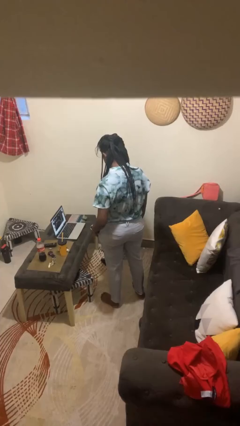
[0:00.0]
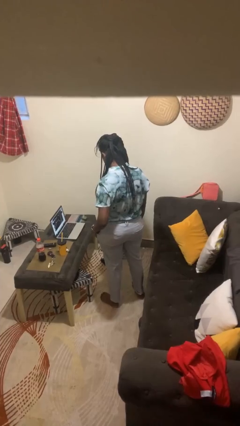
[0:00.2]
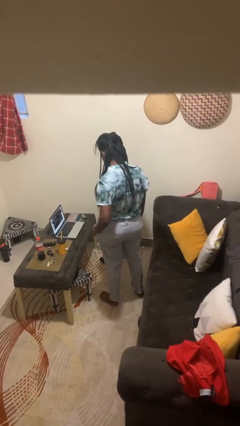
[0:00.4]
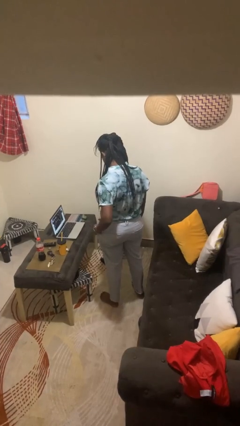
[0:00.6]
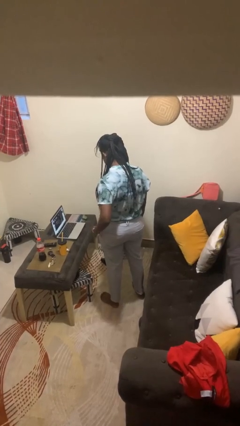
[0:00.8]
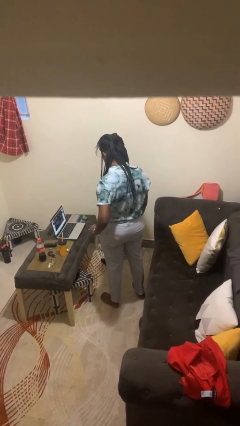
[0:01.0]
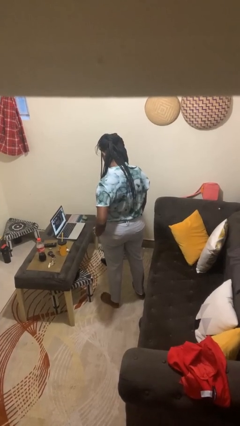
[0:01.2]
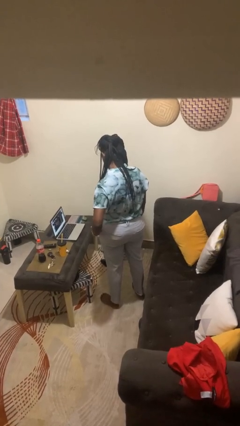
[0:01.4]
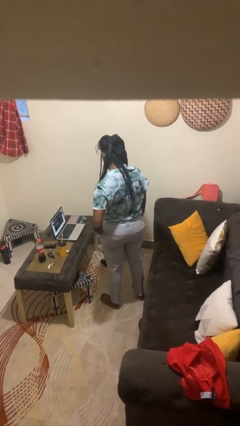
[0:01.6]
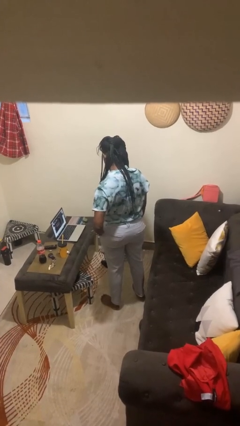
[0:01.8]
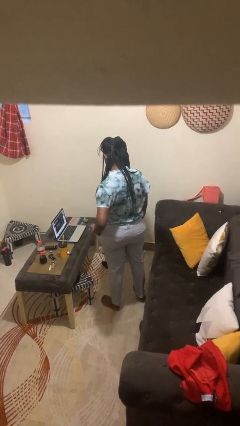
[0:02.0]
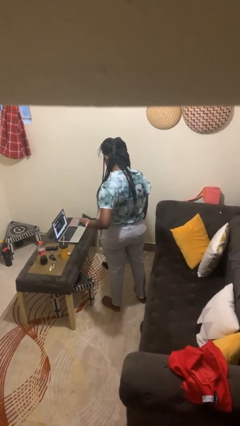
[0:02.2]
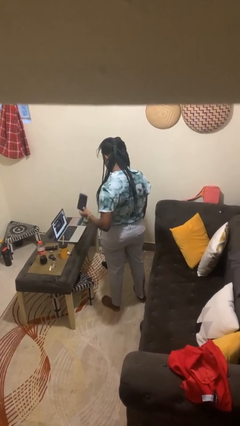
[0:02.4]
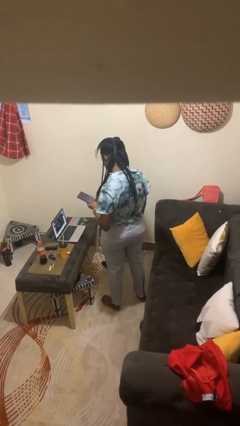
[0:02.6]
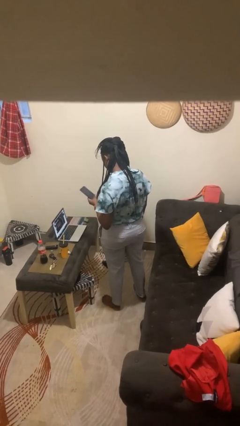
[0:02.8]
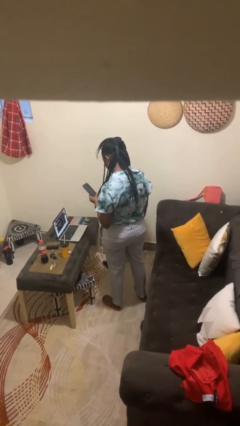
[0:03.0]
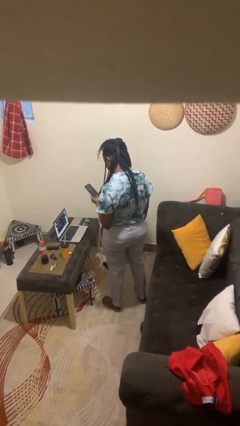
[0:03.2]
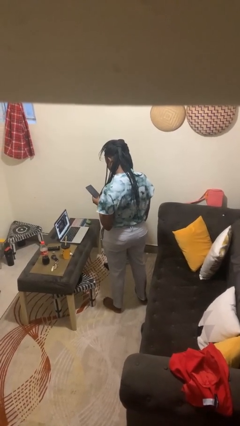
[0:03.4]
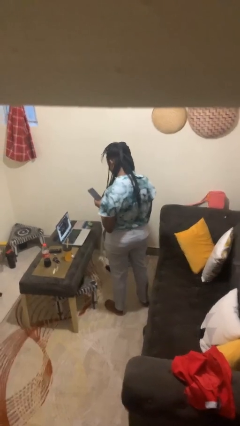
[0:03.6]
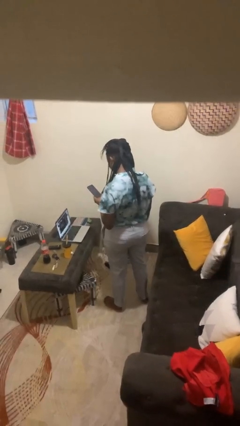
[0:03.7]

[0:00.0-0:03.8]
person takes phone from pocket

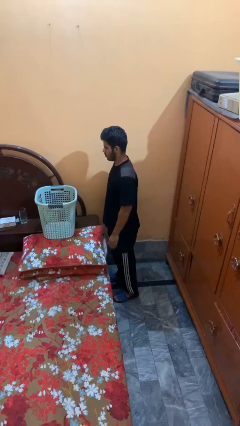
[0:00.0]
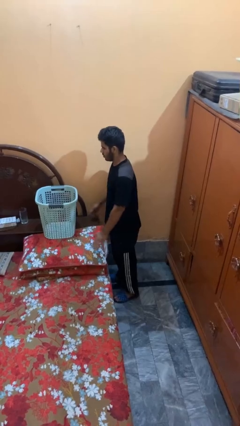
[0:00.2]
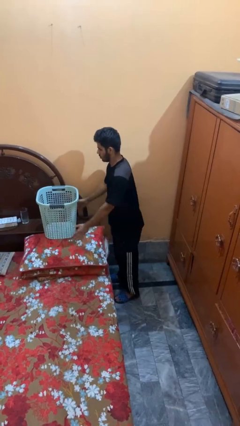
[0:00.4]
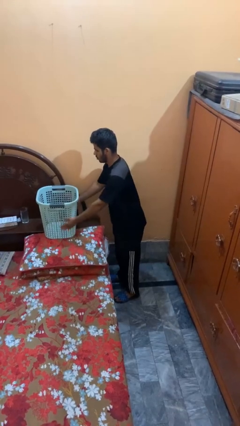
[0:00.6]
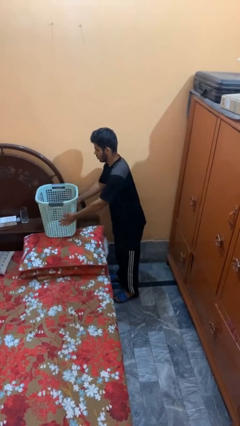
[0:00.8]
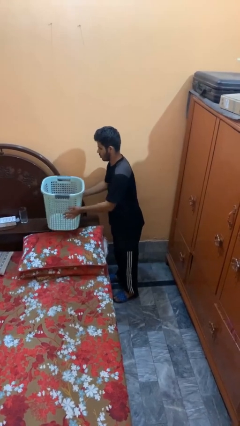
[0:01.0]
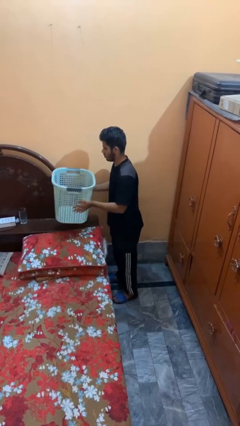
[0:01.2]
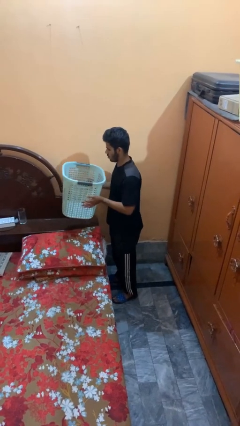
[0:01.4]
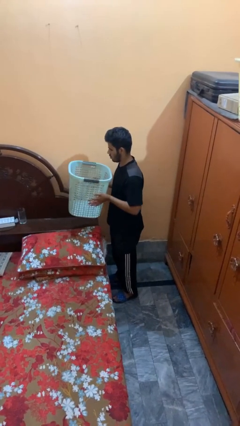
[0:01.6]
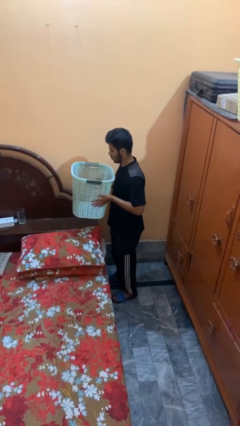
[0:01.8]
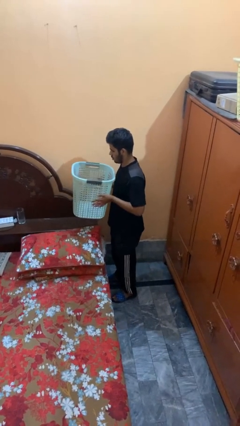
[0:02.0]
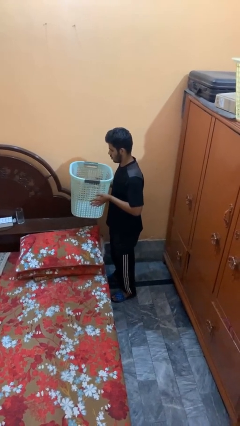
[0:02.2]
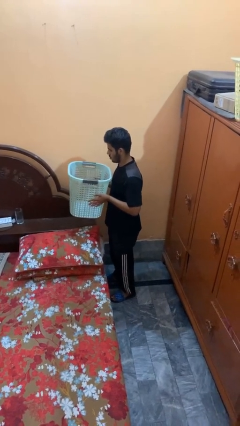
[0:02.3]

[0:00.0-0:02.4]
person picks up object from bed

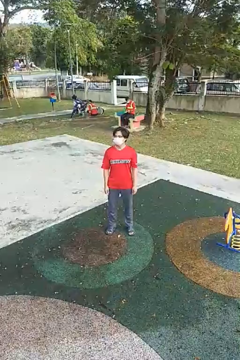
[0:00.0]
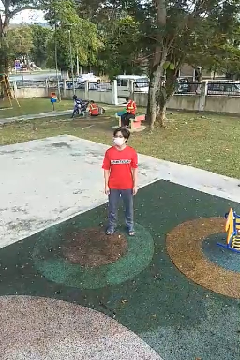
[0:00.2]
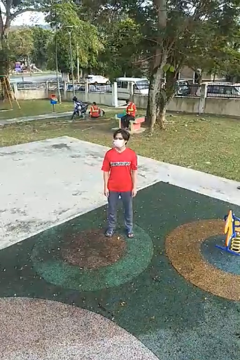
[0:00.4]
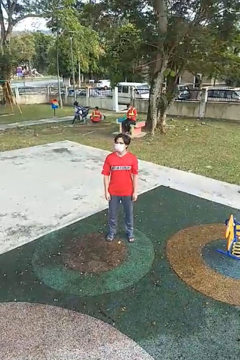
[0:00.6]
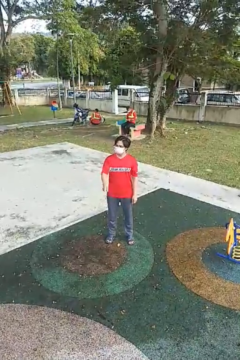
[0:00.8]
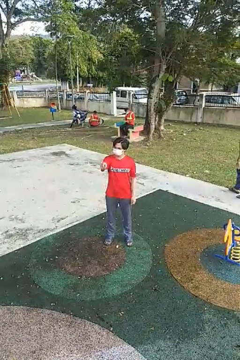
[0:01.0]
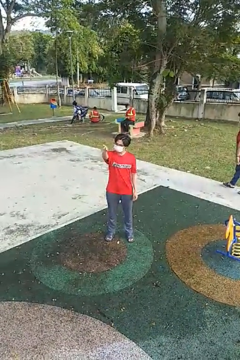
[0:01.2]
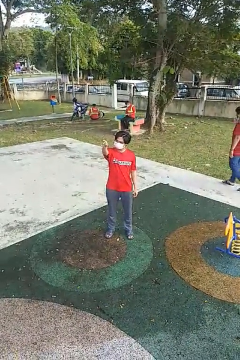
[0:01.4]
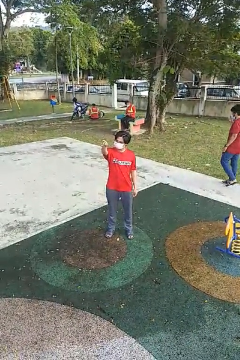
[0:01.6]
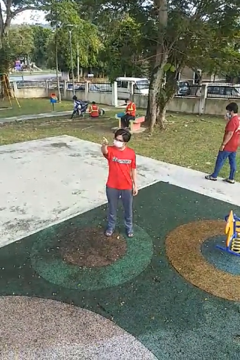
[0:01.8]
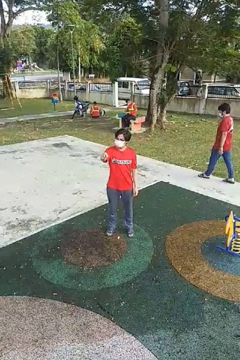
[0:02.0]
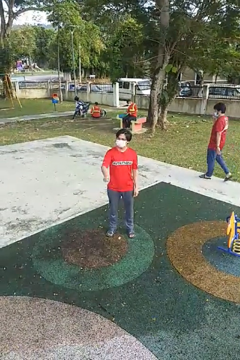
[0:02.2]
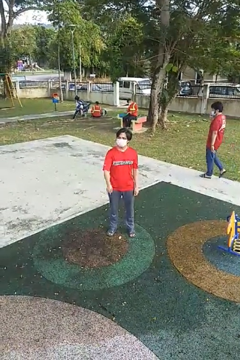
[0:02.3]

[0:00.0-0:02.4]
person points at person

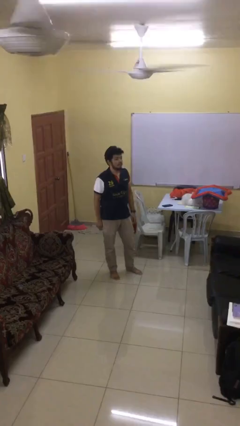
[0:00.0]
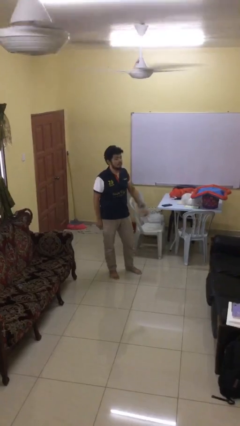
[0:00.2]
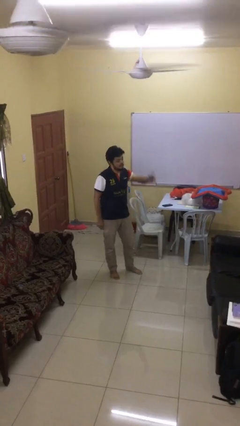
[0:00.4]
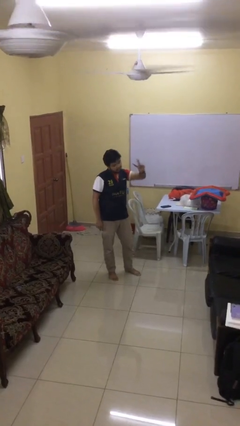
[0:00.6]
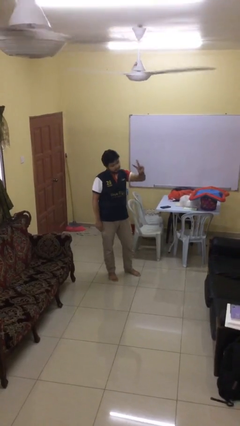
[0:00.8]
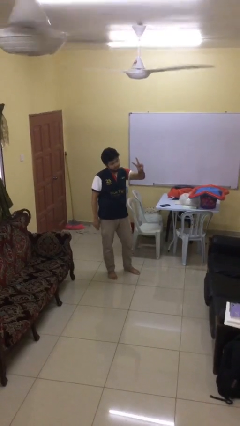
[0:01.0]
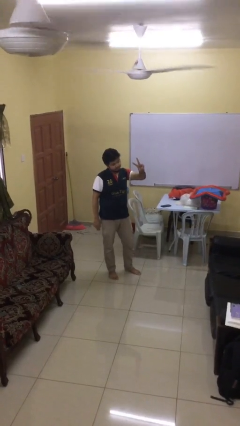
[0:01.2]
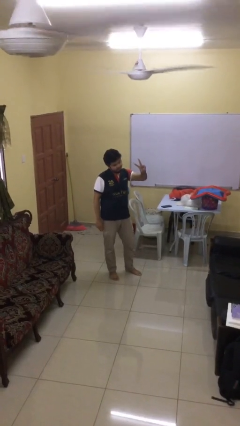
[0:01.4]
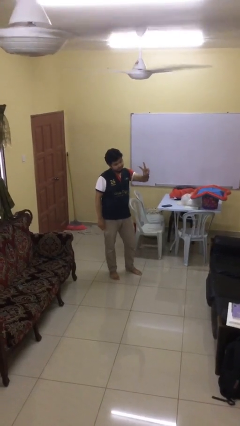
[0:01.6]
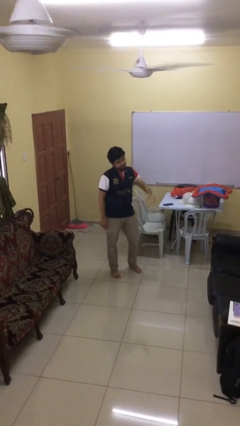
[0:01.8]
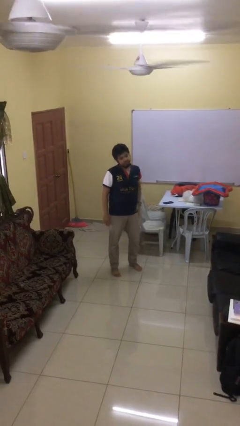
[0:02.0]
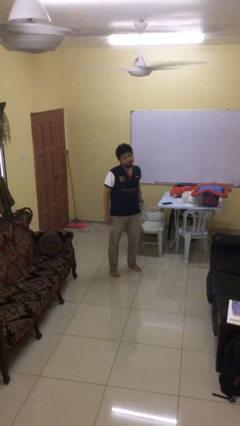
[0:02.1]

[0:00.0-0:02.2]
person gestures peace

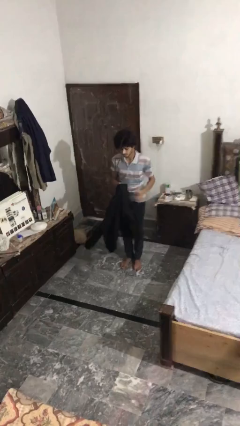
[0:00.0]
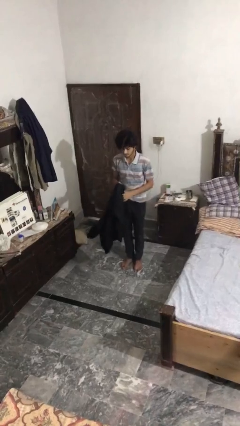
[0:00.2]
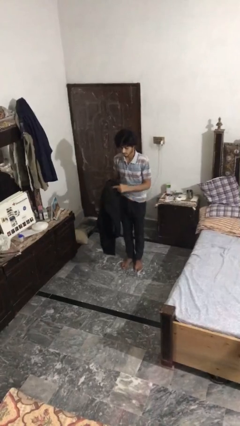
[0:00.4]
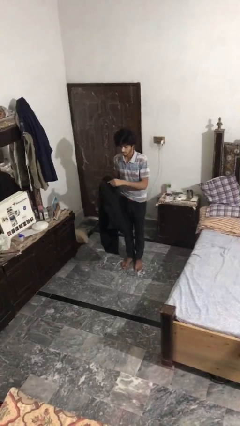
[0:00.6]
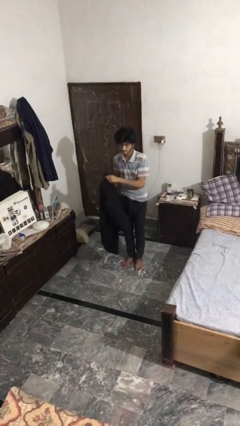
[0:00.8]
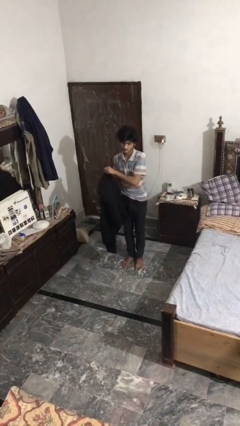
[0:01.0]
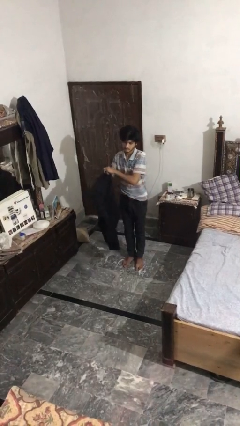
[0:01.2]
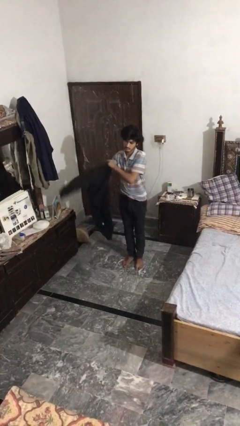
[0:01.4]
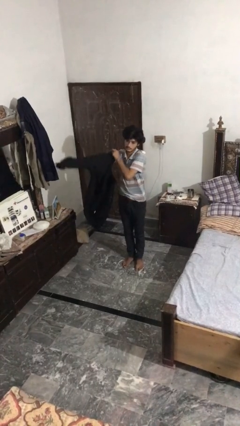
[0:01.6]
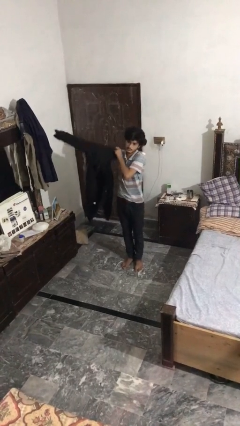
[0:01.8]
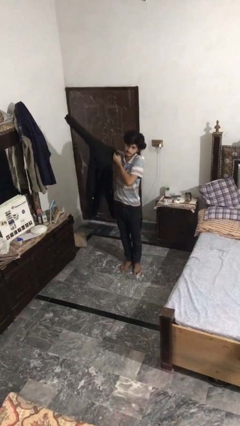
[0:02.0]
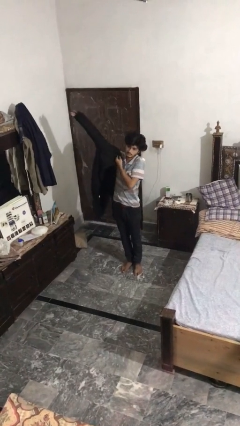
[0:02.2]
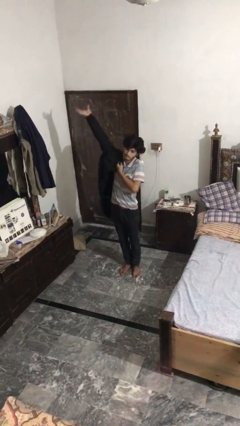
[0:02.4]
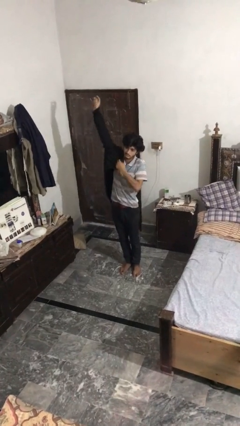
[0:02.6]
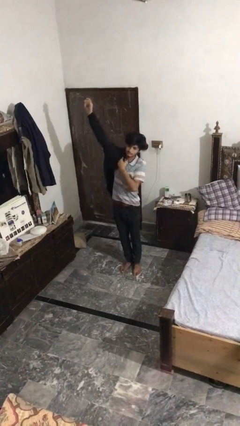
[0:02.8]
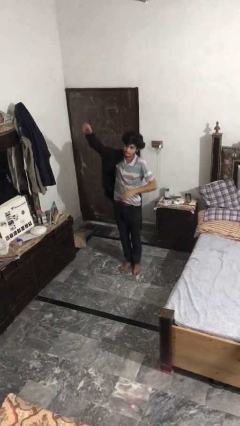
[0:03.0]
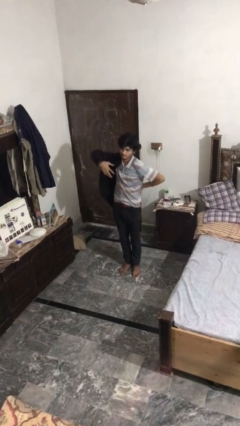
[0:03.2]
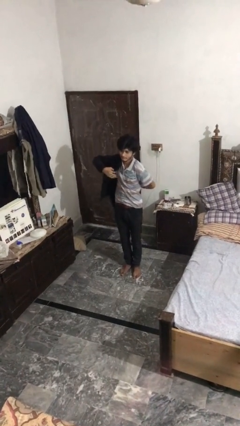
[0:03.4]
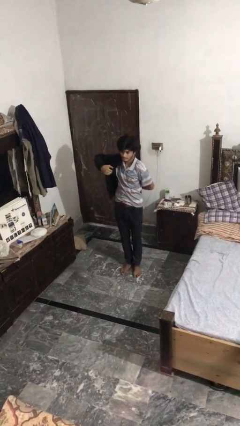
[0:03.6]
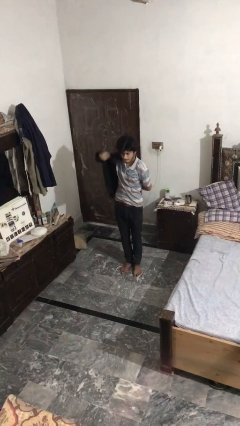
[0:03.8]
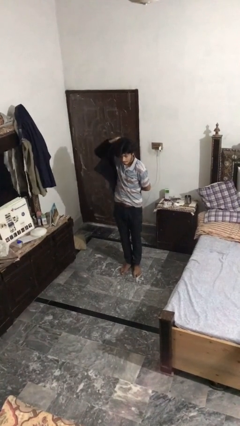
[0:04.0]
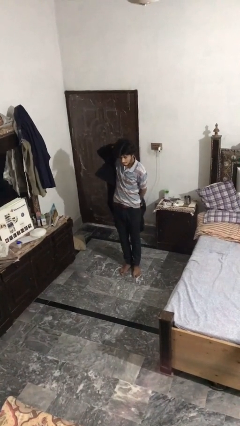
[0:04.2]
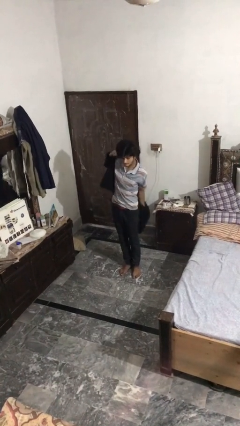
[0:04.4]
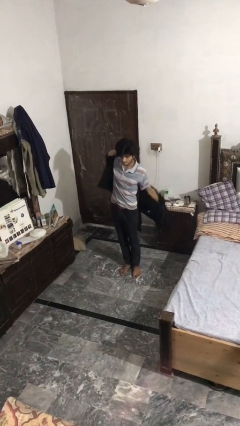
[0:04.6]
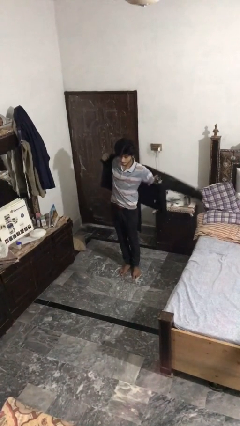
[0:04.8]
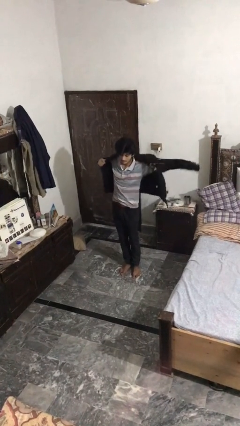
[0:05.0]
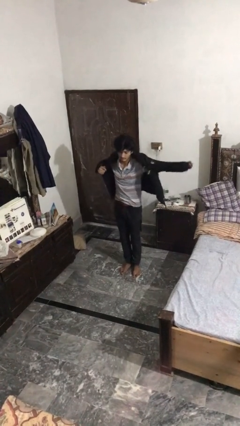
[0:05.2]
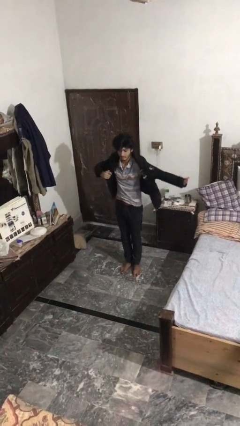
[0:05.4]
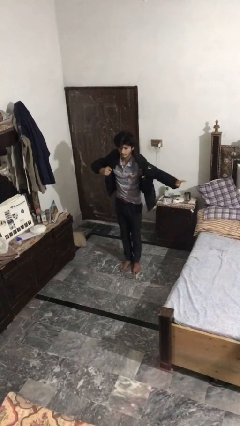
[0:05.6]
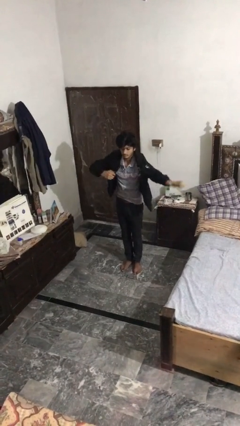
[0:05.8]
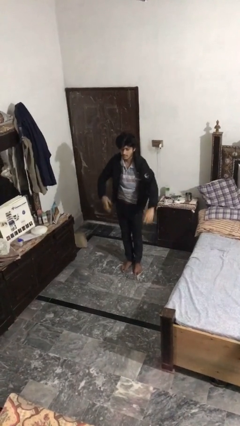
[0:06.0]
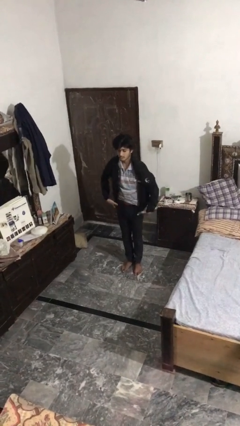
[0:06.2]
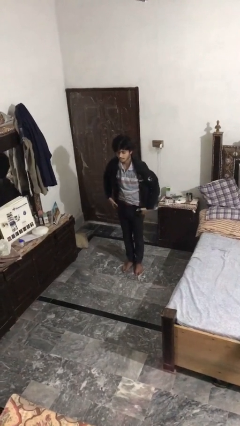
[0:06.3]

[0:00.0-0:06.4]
person puts on jacket

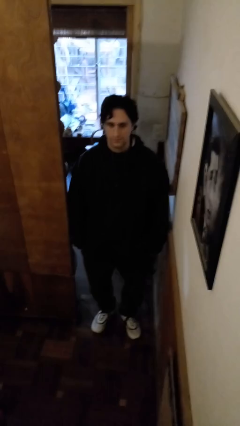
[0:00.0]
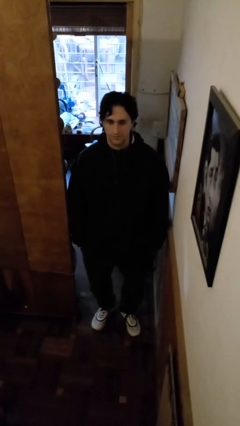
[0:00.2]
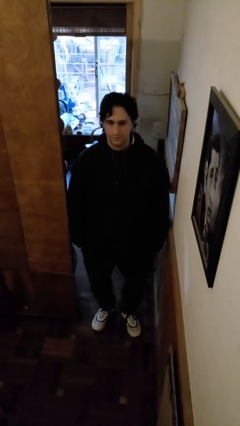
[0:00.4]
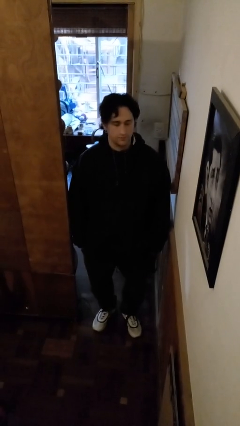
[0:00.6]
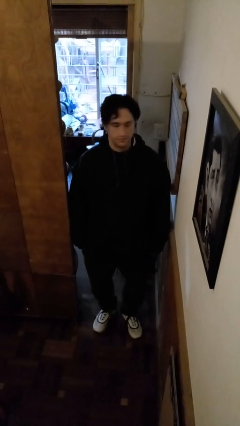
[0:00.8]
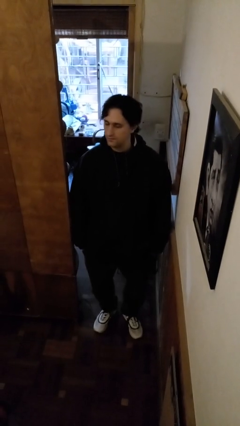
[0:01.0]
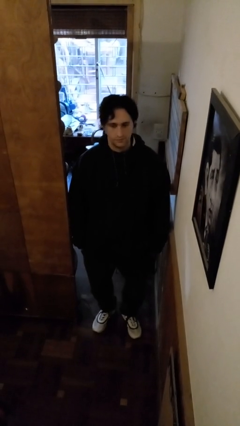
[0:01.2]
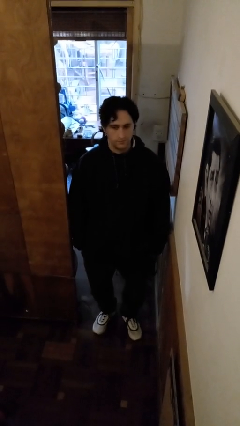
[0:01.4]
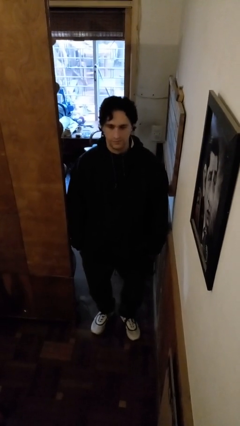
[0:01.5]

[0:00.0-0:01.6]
person shakes head
